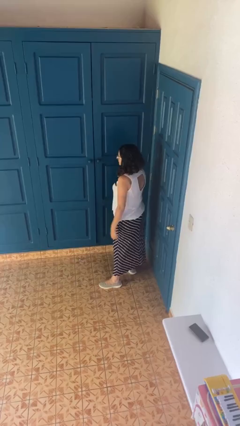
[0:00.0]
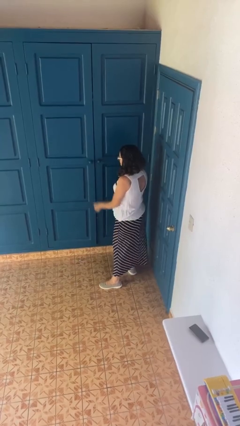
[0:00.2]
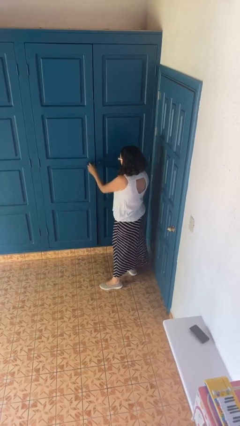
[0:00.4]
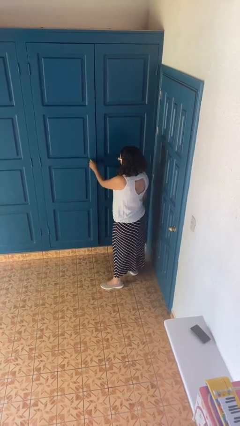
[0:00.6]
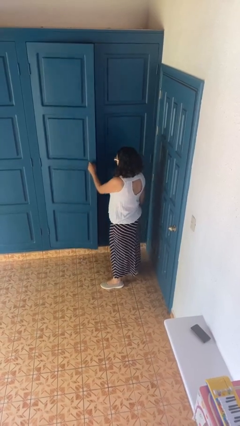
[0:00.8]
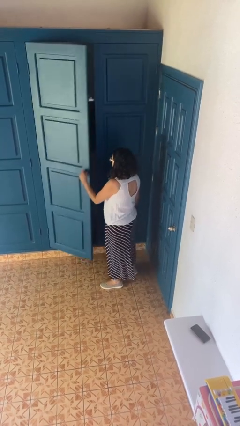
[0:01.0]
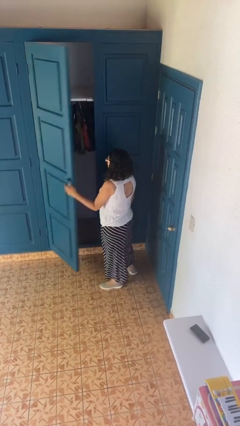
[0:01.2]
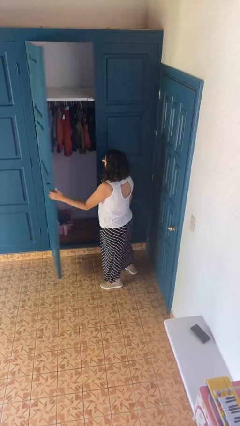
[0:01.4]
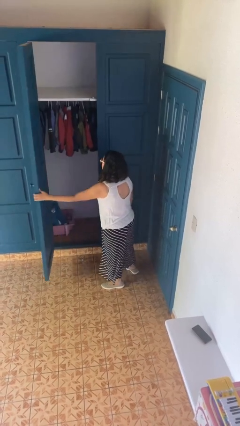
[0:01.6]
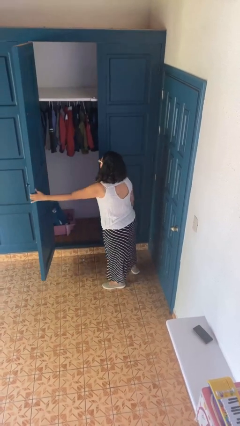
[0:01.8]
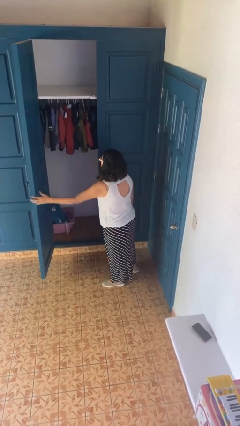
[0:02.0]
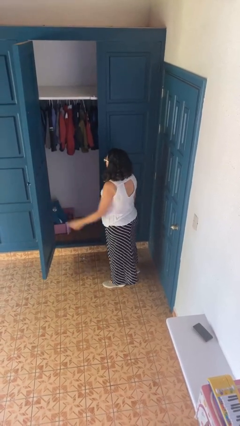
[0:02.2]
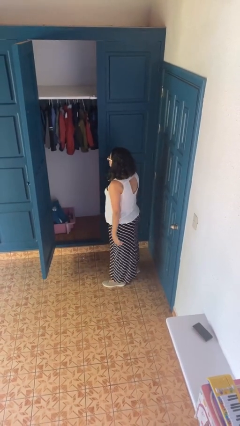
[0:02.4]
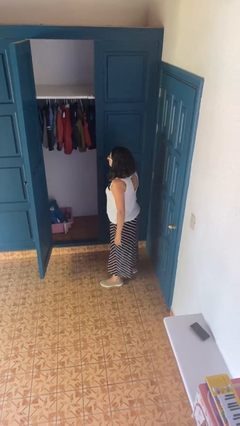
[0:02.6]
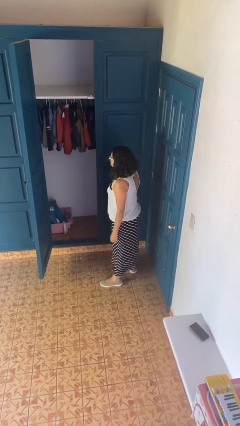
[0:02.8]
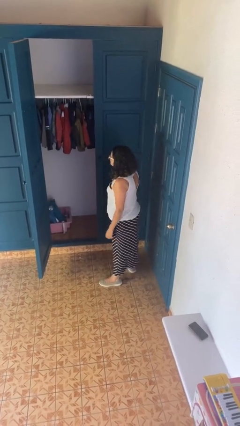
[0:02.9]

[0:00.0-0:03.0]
person opens closet door

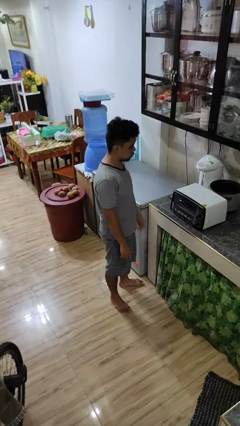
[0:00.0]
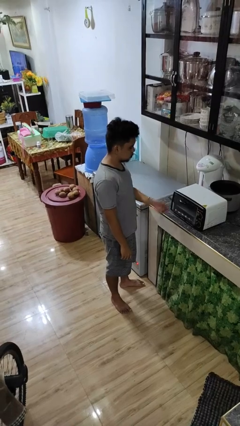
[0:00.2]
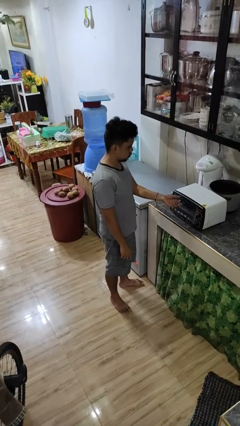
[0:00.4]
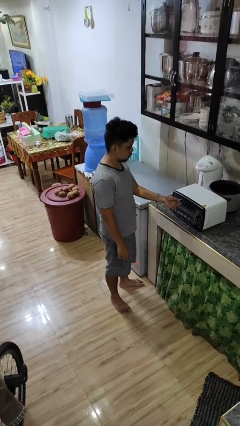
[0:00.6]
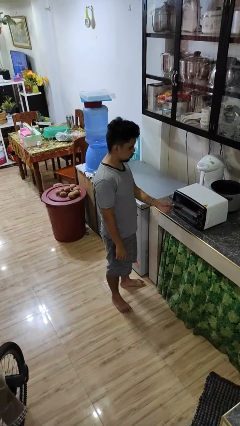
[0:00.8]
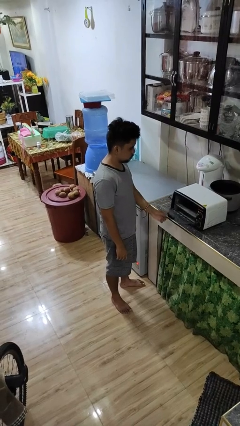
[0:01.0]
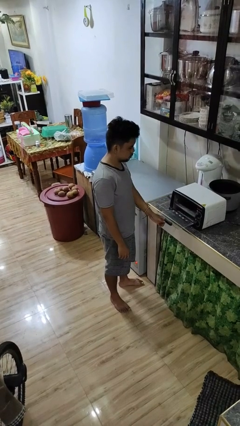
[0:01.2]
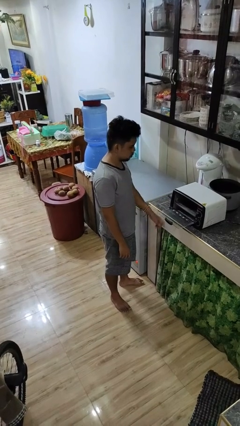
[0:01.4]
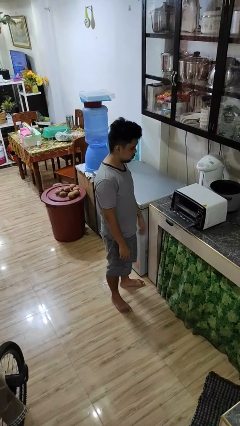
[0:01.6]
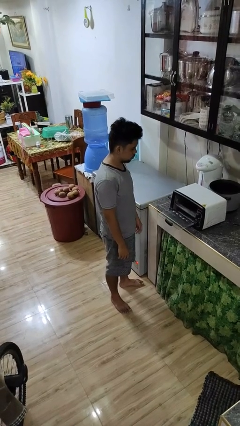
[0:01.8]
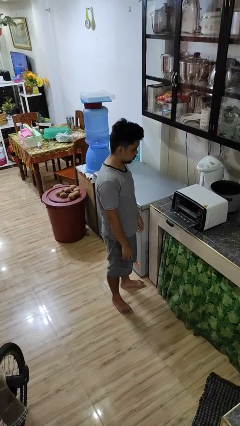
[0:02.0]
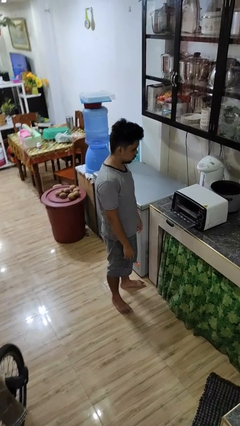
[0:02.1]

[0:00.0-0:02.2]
person opens microwave

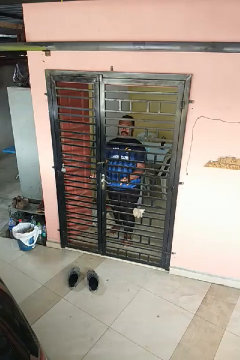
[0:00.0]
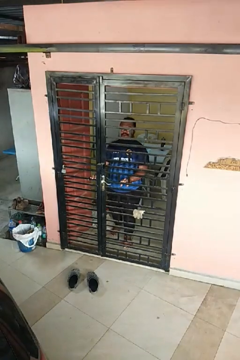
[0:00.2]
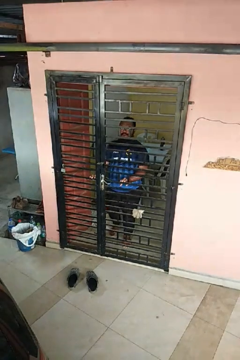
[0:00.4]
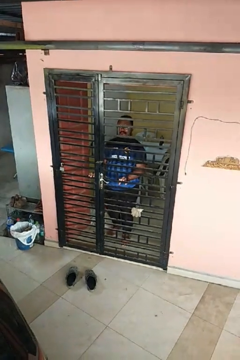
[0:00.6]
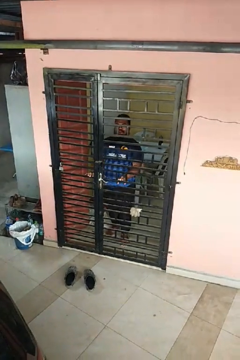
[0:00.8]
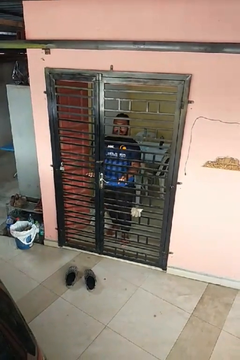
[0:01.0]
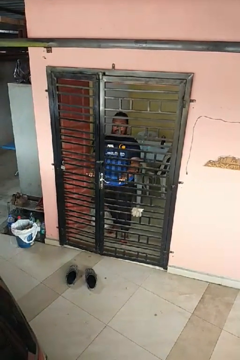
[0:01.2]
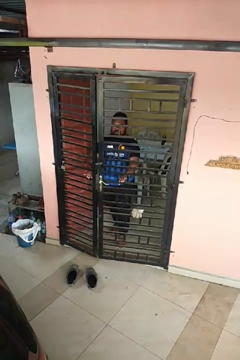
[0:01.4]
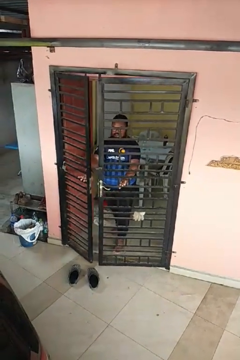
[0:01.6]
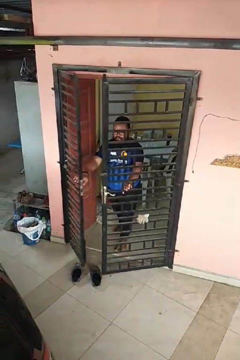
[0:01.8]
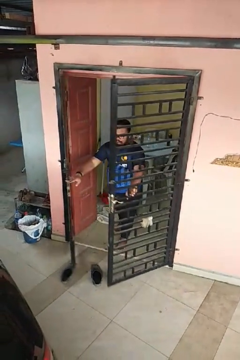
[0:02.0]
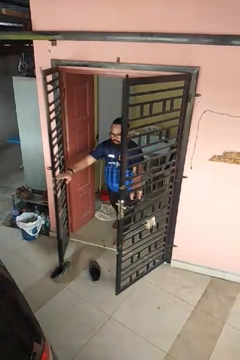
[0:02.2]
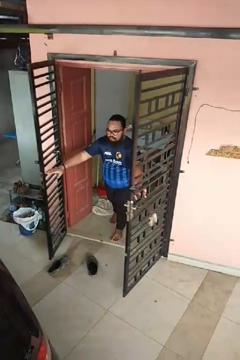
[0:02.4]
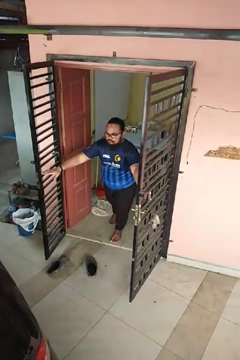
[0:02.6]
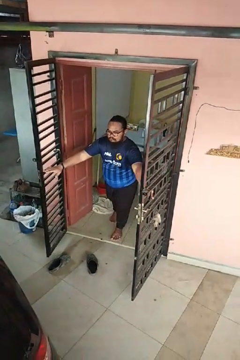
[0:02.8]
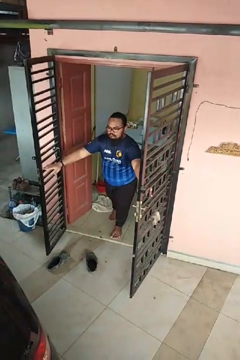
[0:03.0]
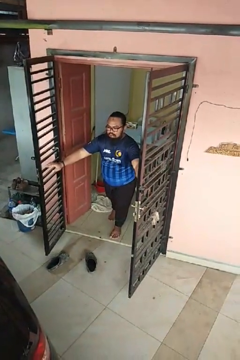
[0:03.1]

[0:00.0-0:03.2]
person opens gate

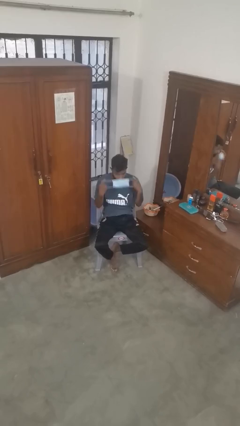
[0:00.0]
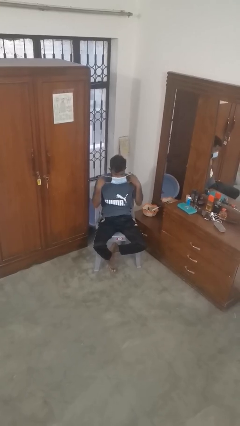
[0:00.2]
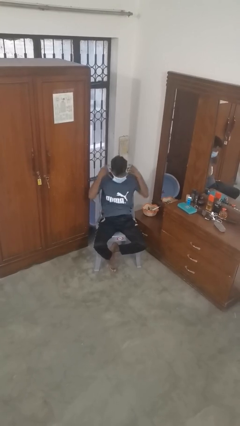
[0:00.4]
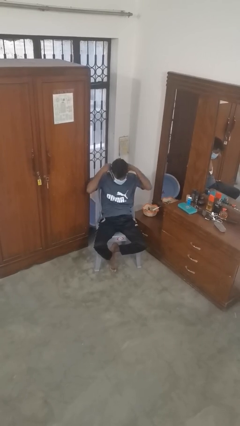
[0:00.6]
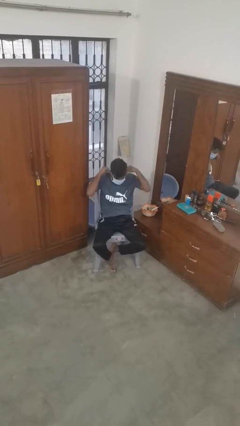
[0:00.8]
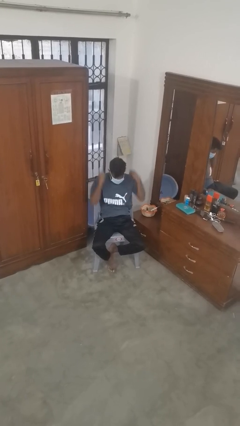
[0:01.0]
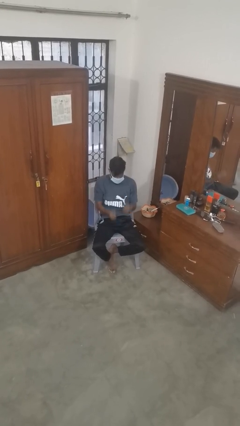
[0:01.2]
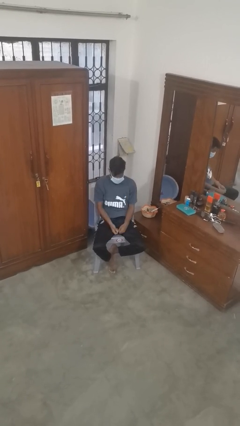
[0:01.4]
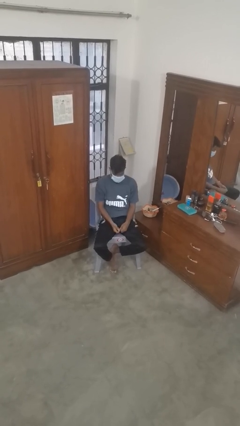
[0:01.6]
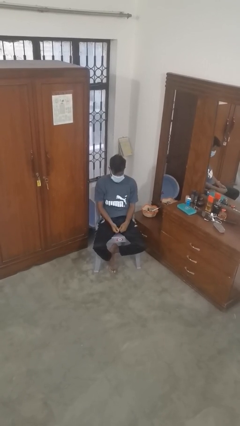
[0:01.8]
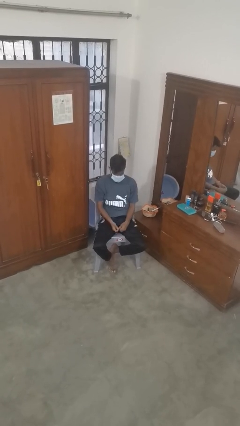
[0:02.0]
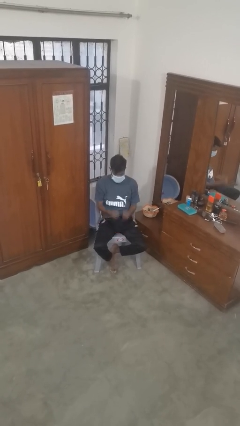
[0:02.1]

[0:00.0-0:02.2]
person puts on facemask

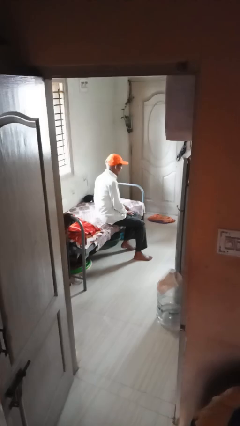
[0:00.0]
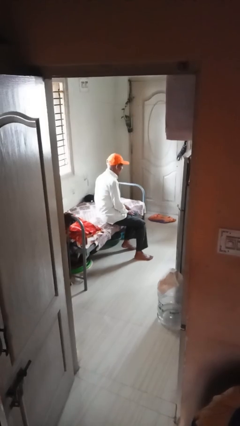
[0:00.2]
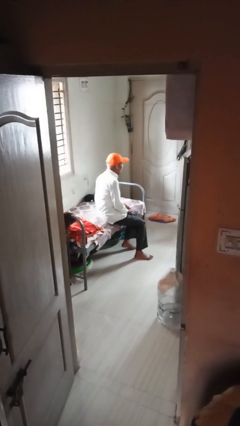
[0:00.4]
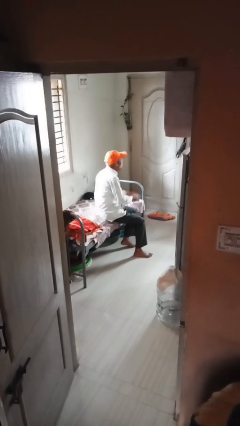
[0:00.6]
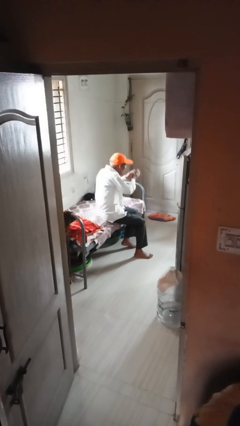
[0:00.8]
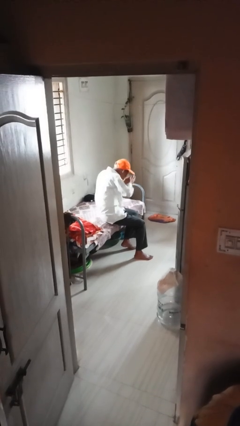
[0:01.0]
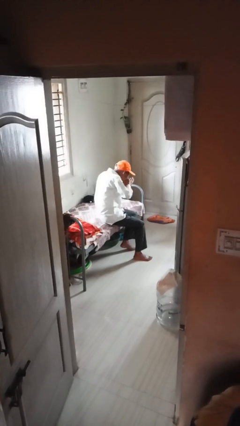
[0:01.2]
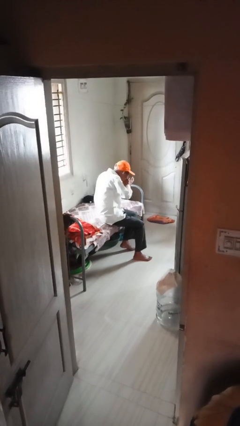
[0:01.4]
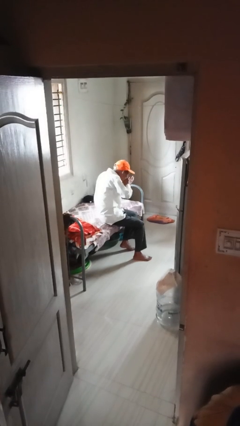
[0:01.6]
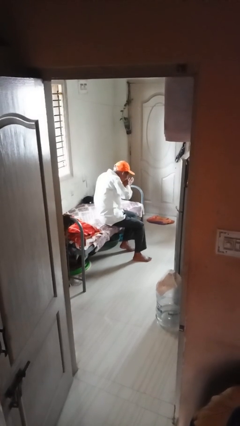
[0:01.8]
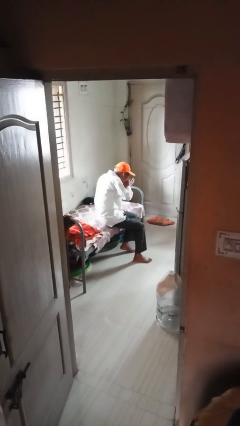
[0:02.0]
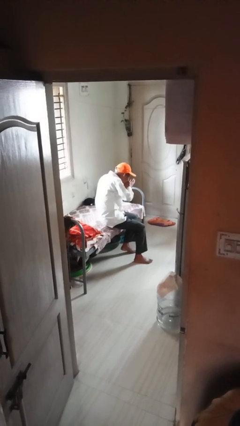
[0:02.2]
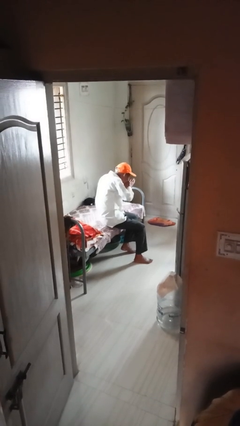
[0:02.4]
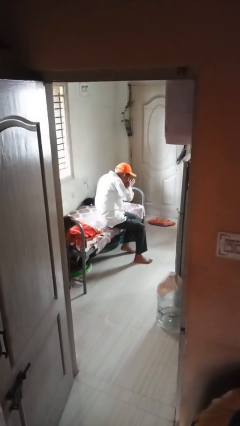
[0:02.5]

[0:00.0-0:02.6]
person sneezes into hand

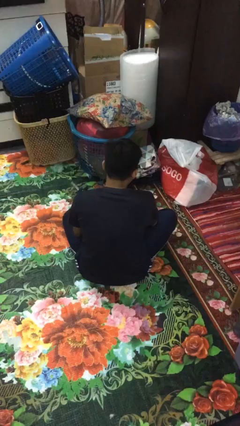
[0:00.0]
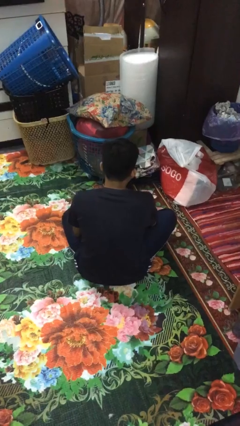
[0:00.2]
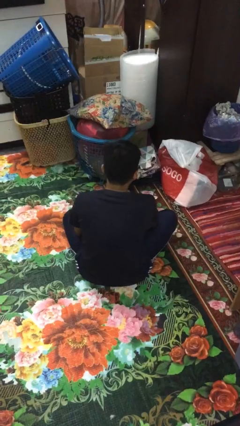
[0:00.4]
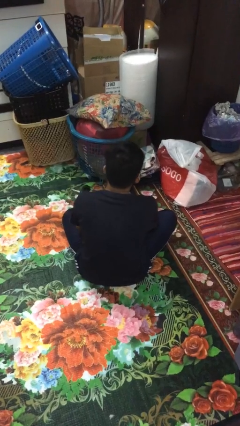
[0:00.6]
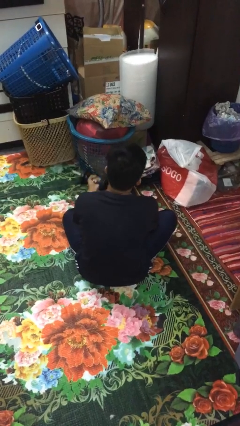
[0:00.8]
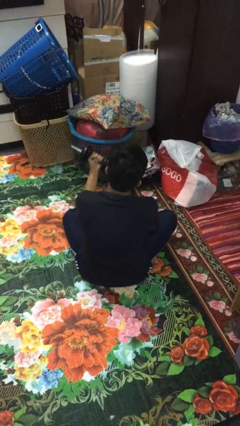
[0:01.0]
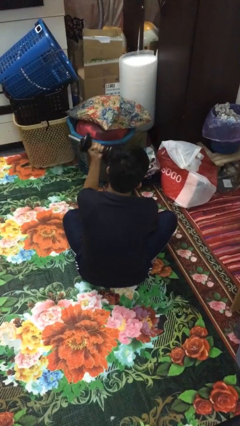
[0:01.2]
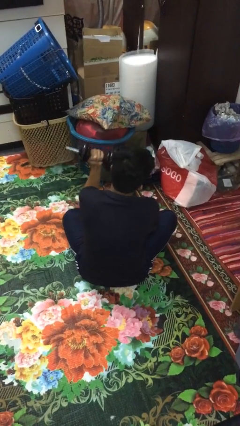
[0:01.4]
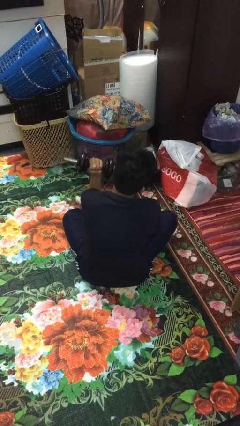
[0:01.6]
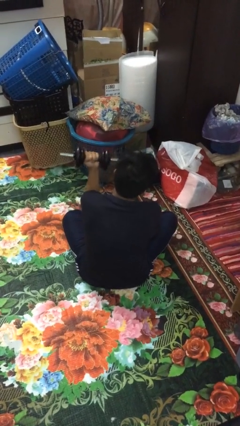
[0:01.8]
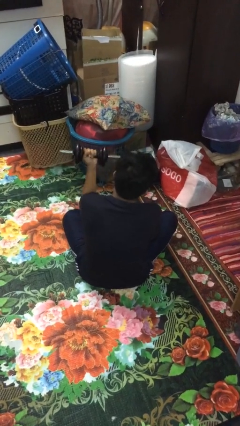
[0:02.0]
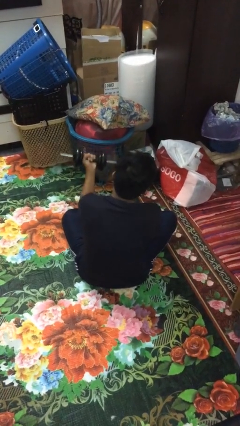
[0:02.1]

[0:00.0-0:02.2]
person lifts dumbbells

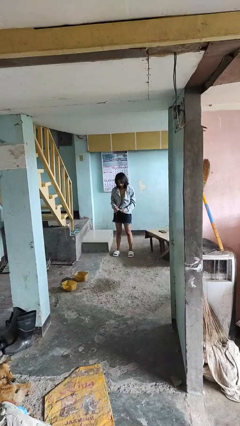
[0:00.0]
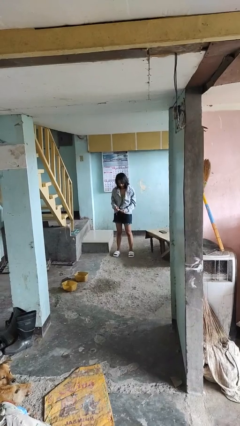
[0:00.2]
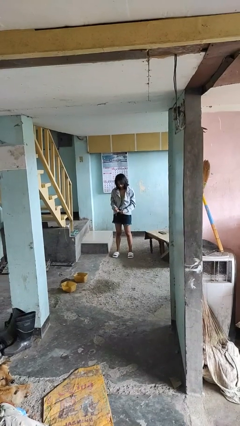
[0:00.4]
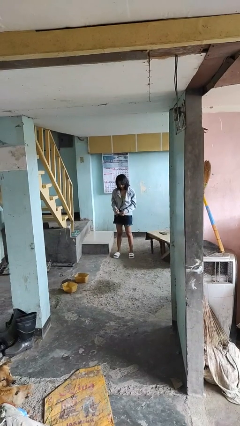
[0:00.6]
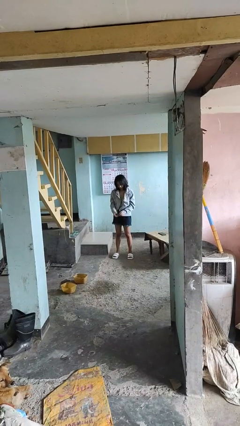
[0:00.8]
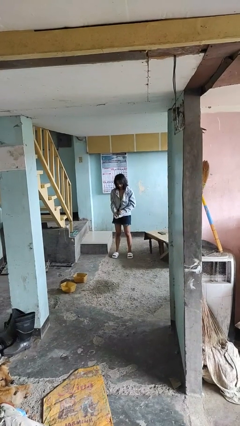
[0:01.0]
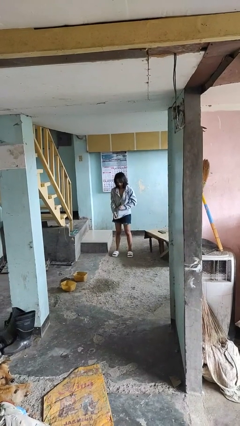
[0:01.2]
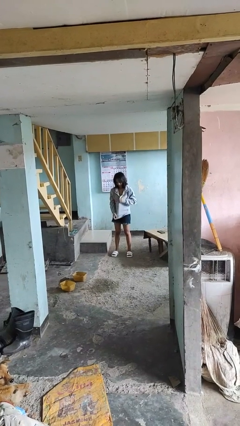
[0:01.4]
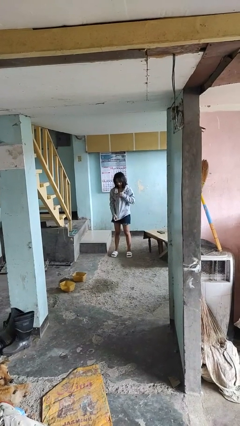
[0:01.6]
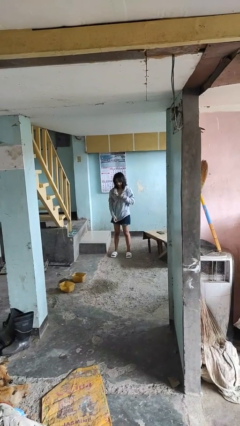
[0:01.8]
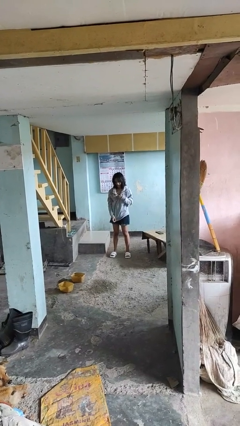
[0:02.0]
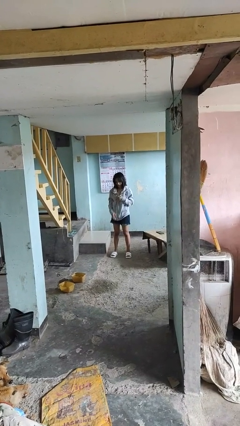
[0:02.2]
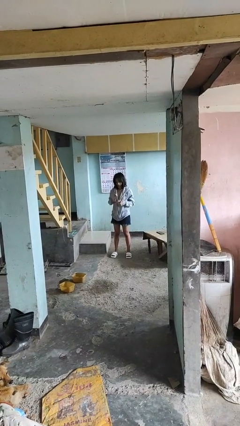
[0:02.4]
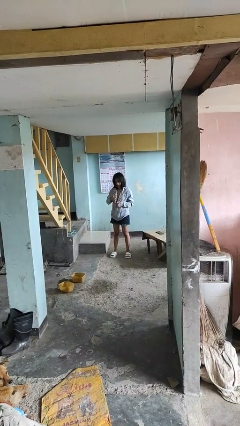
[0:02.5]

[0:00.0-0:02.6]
person zips up jacket
